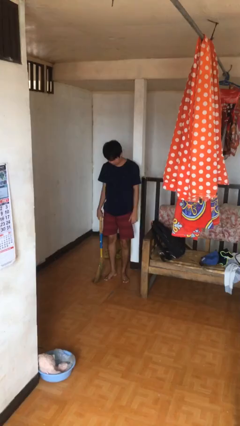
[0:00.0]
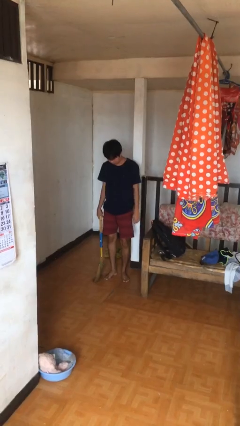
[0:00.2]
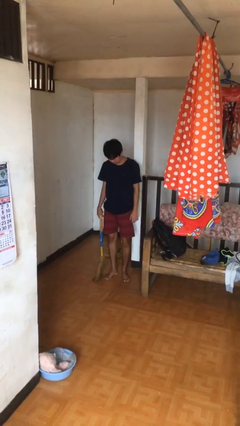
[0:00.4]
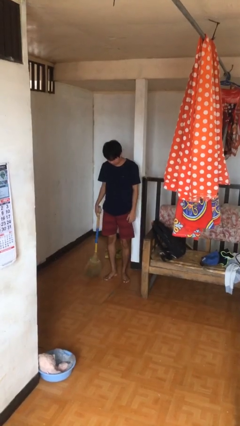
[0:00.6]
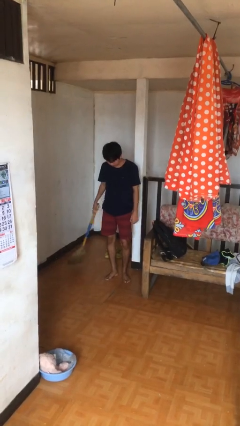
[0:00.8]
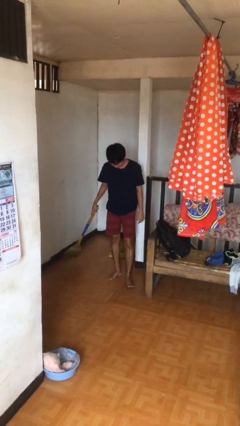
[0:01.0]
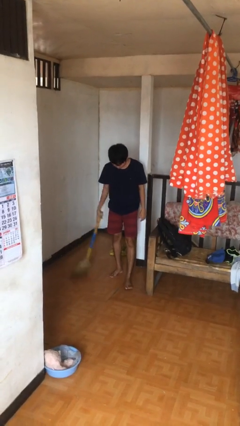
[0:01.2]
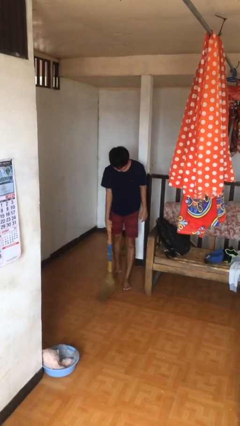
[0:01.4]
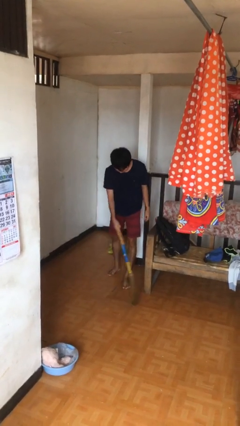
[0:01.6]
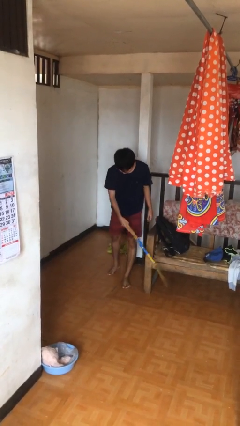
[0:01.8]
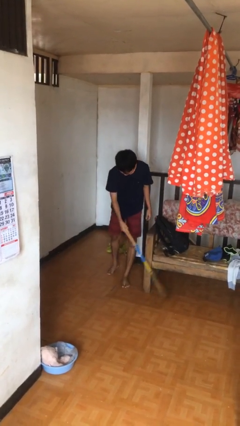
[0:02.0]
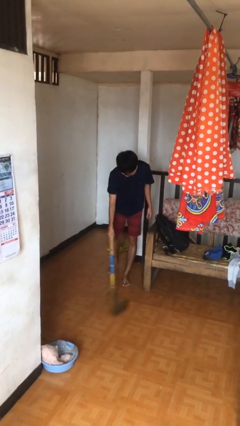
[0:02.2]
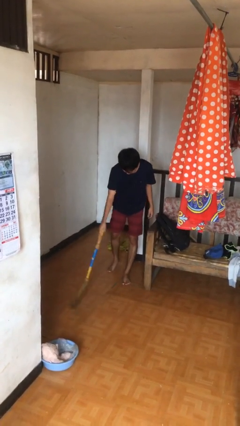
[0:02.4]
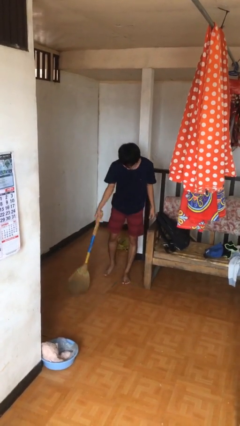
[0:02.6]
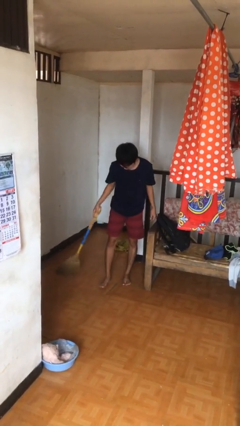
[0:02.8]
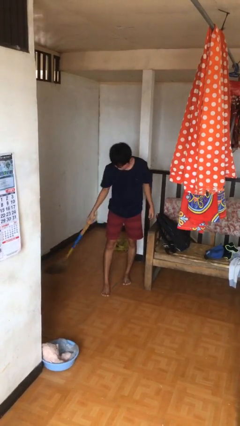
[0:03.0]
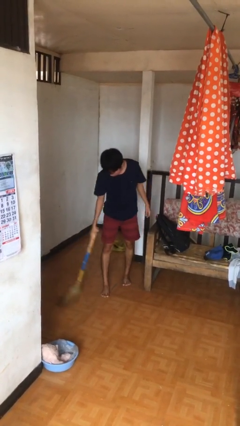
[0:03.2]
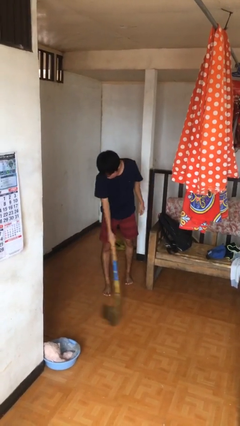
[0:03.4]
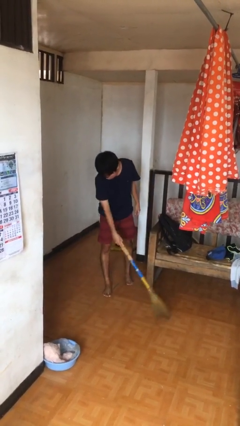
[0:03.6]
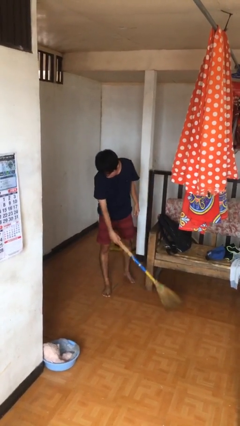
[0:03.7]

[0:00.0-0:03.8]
person sweeps floor

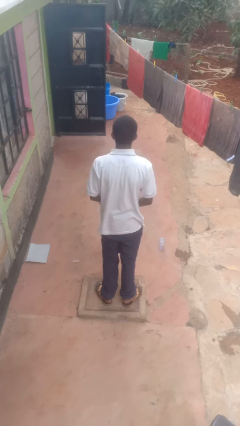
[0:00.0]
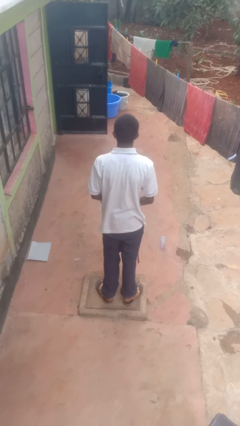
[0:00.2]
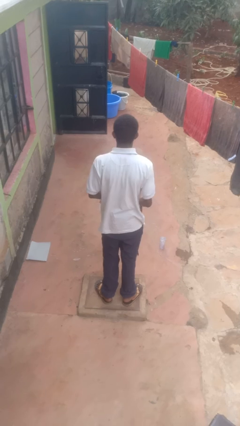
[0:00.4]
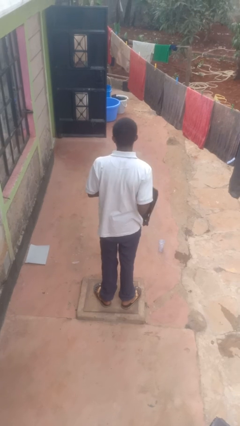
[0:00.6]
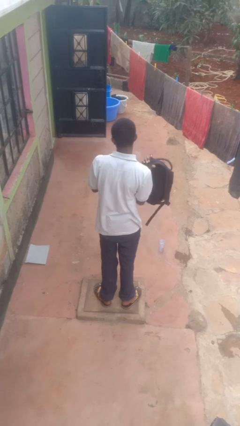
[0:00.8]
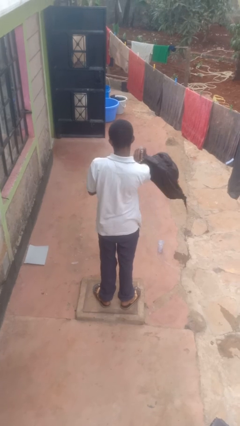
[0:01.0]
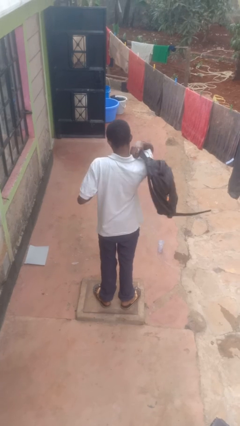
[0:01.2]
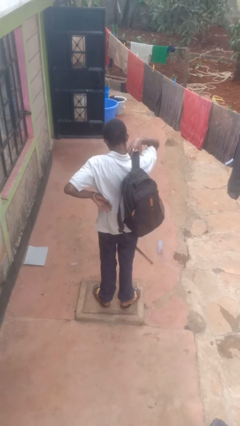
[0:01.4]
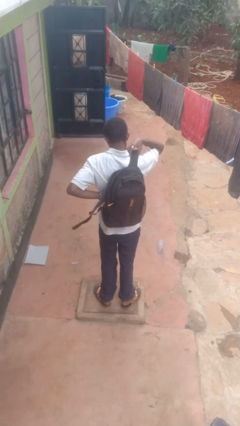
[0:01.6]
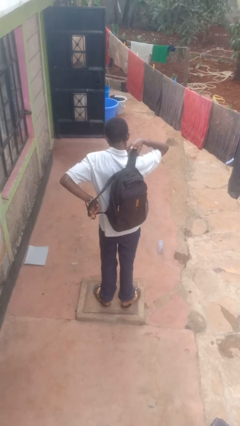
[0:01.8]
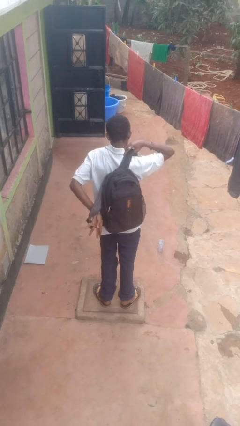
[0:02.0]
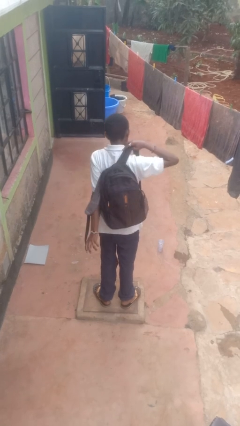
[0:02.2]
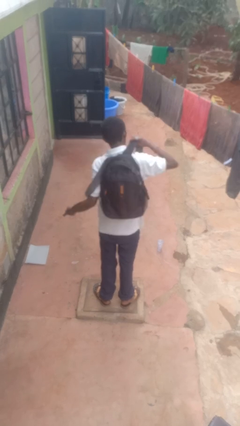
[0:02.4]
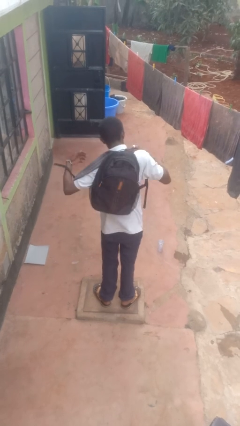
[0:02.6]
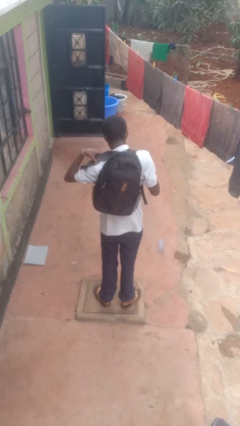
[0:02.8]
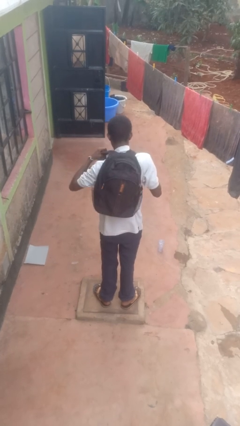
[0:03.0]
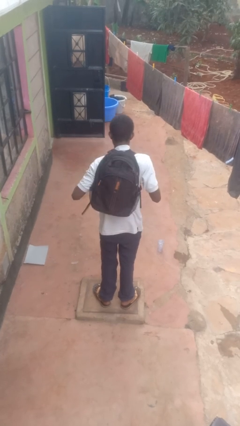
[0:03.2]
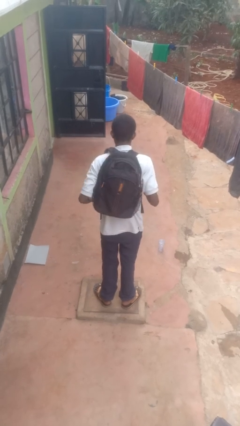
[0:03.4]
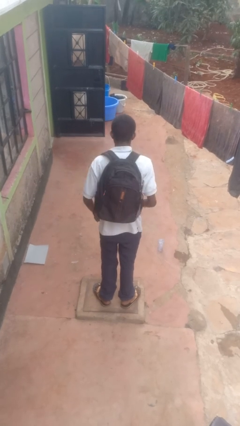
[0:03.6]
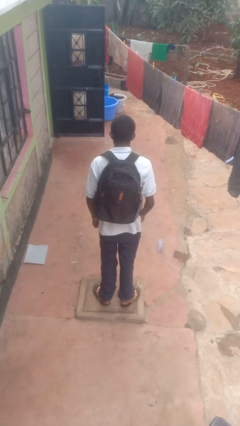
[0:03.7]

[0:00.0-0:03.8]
person puts on backpack

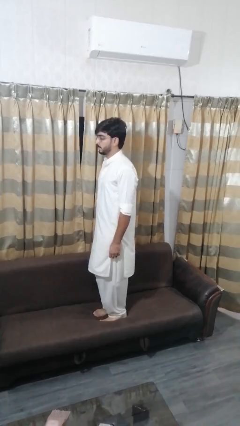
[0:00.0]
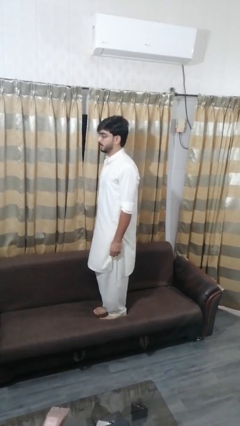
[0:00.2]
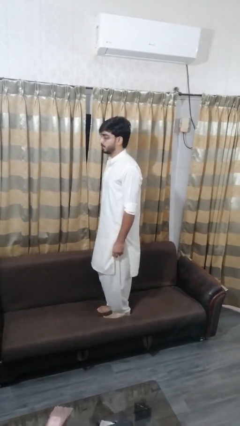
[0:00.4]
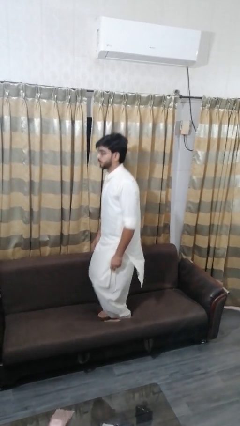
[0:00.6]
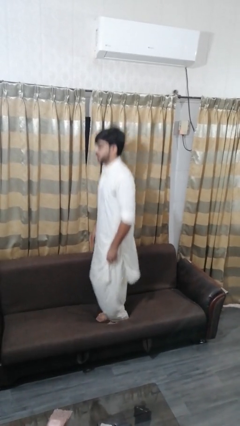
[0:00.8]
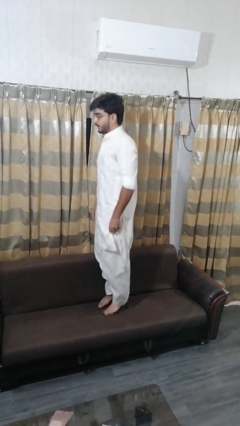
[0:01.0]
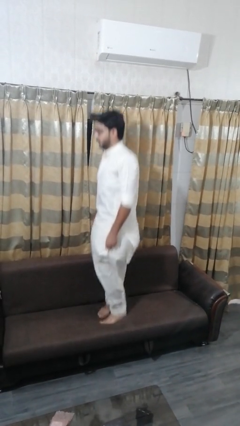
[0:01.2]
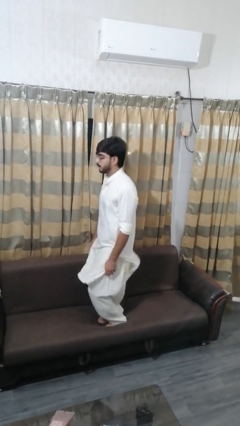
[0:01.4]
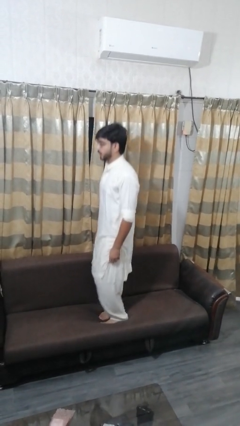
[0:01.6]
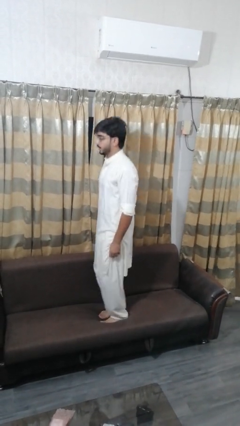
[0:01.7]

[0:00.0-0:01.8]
person jumps on couch

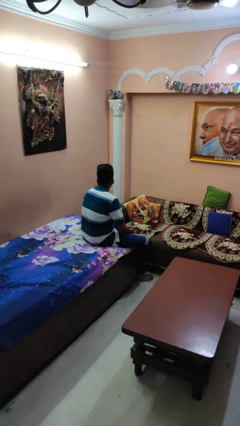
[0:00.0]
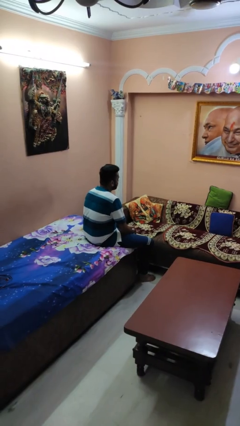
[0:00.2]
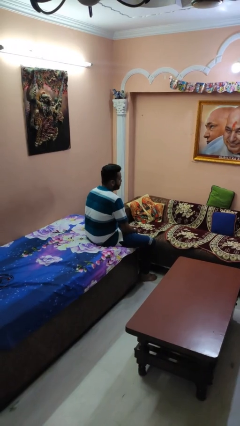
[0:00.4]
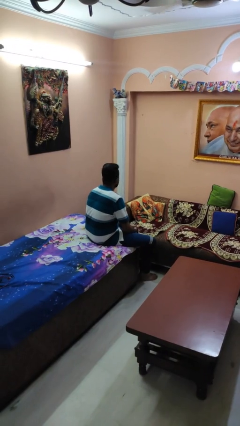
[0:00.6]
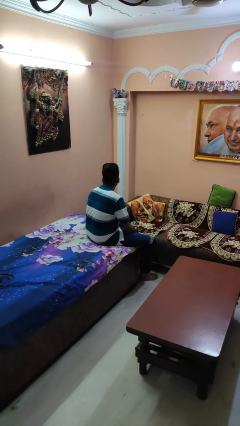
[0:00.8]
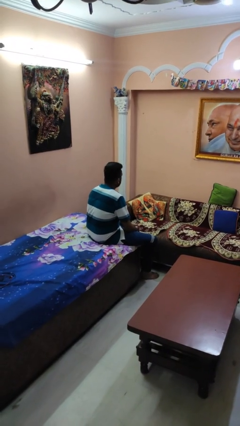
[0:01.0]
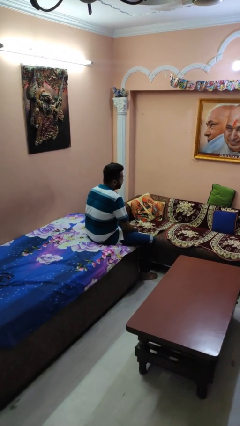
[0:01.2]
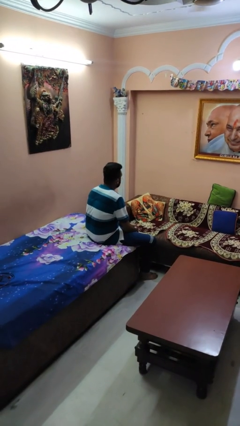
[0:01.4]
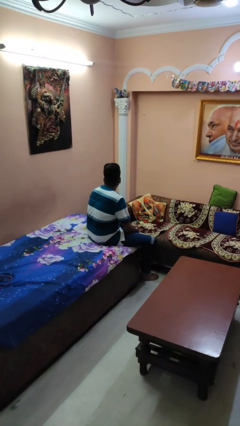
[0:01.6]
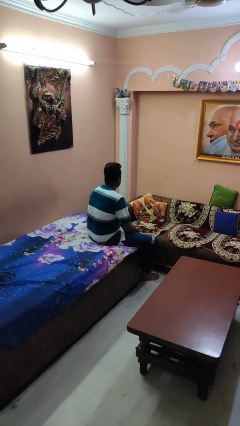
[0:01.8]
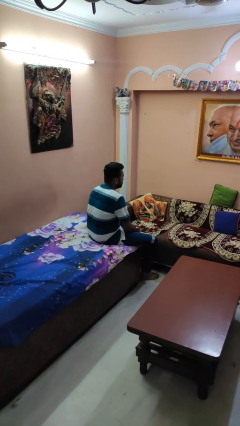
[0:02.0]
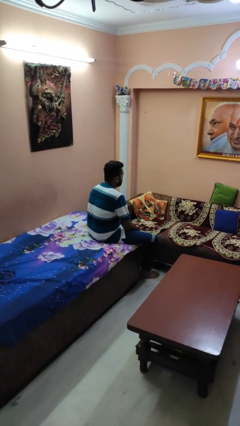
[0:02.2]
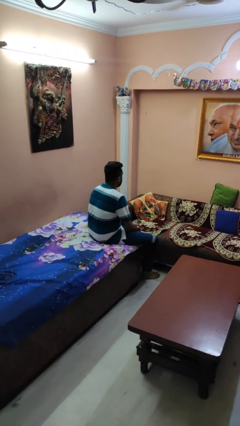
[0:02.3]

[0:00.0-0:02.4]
person shakes head

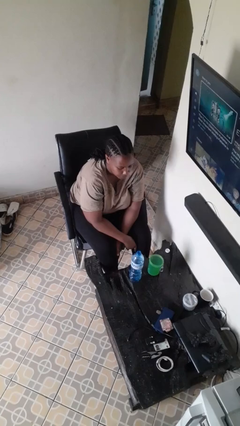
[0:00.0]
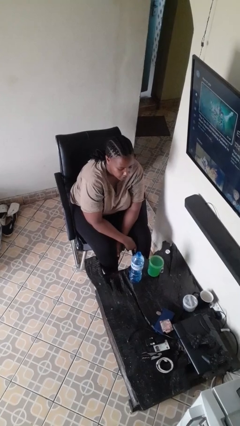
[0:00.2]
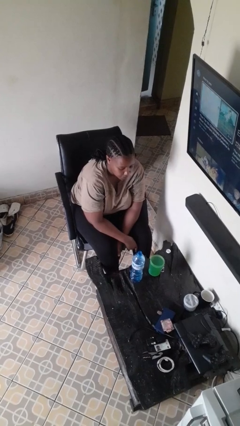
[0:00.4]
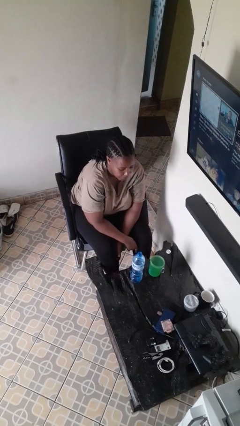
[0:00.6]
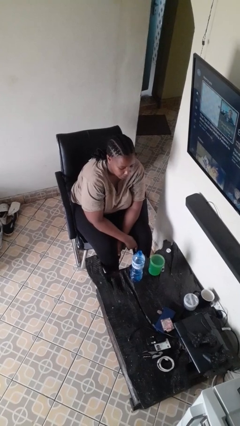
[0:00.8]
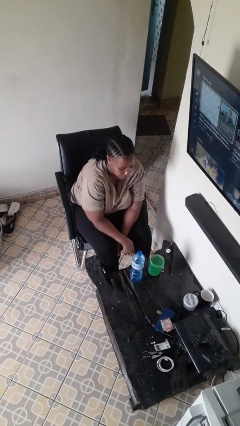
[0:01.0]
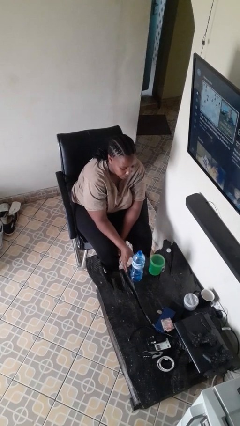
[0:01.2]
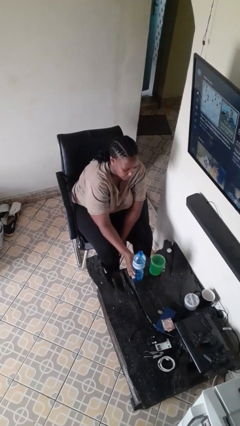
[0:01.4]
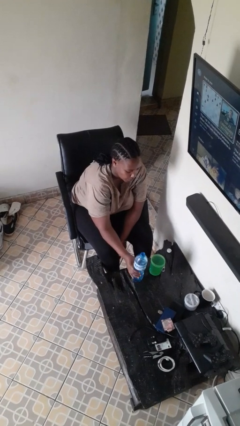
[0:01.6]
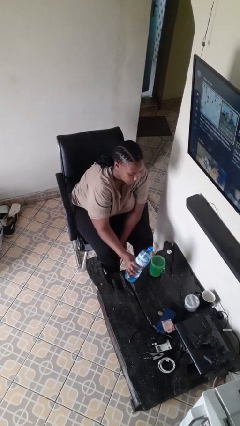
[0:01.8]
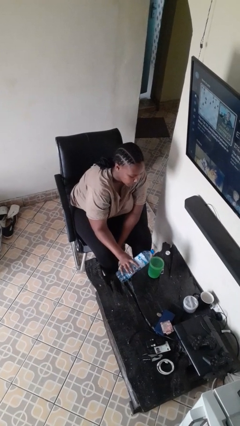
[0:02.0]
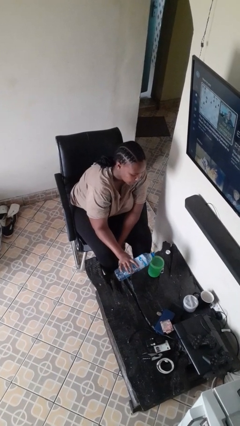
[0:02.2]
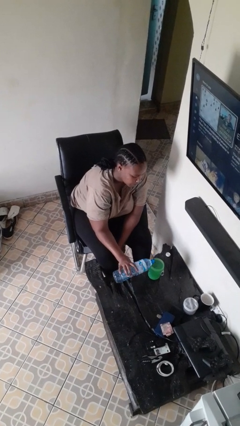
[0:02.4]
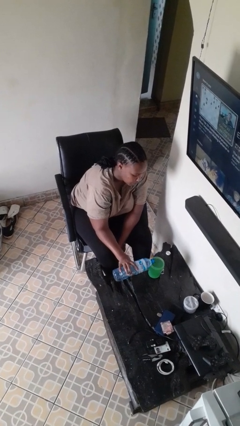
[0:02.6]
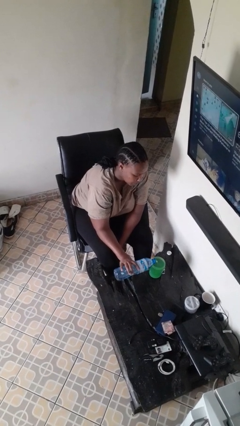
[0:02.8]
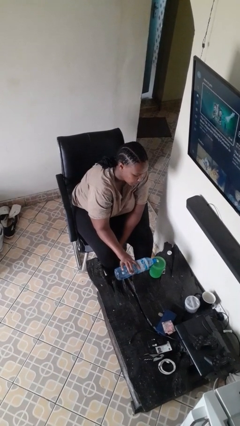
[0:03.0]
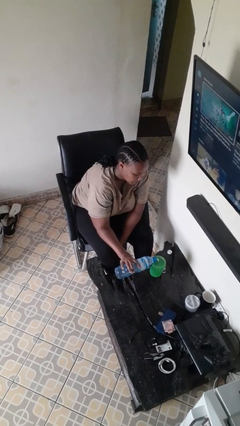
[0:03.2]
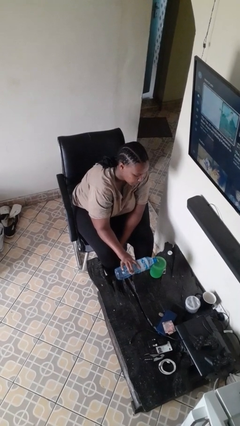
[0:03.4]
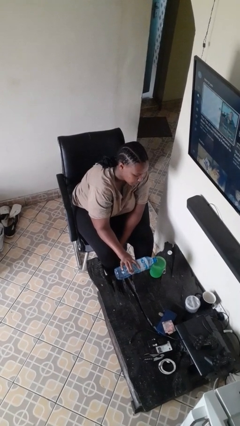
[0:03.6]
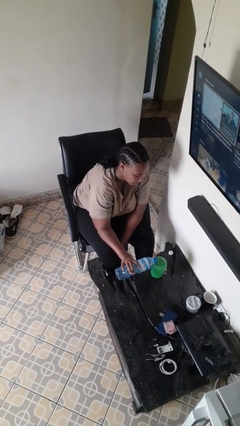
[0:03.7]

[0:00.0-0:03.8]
person pours liquid into cup

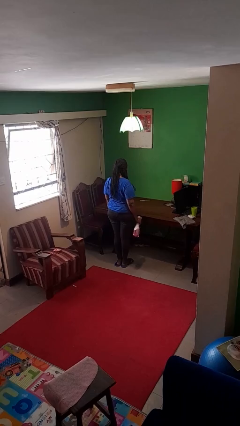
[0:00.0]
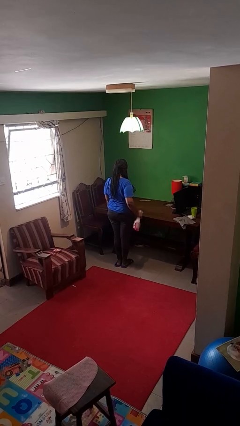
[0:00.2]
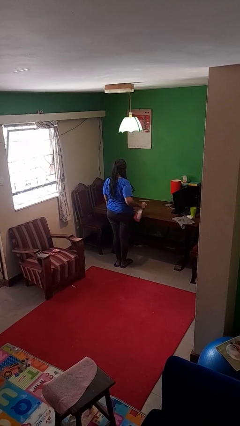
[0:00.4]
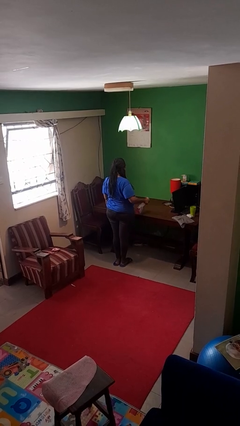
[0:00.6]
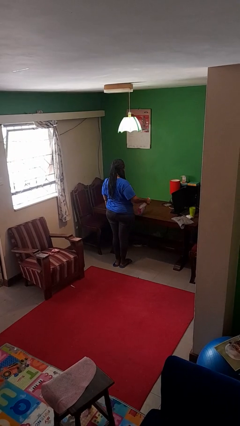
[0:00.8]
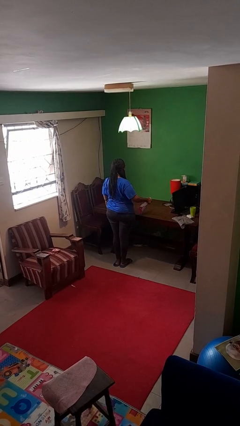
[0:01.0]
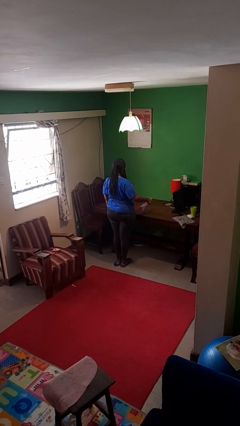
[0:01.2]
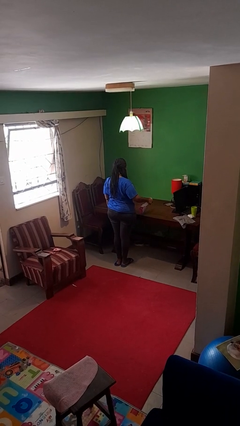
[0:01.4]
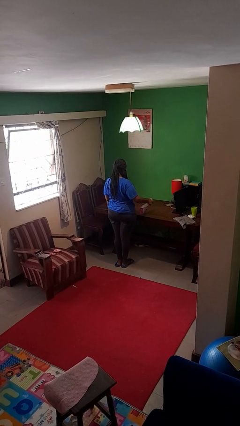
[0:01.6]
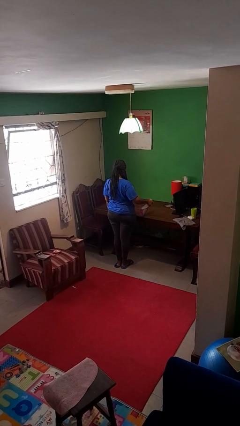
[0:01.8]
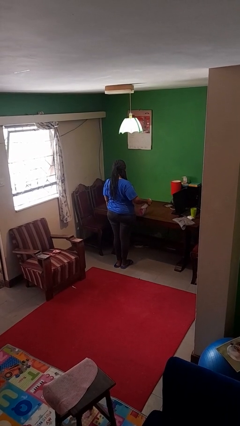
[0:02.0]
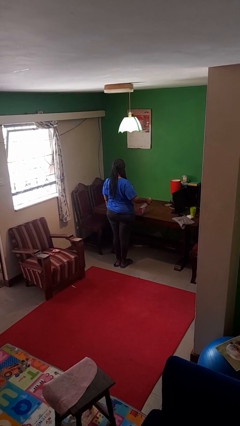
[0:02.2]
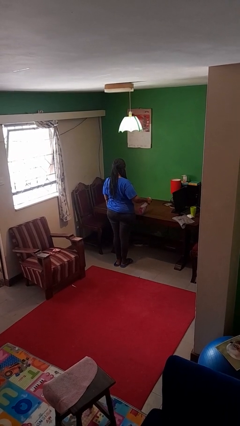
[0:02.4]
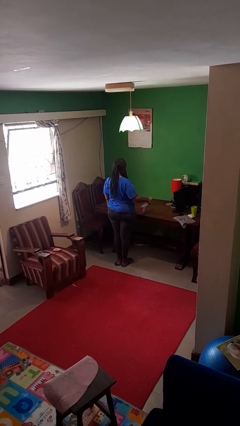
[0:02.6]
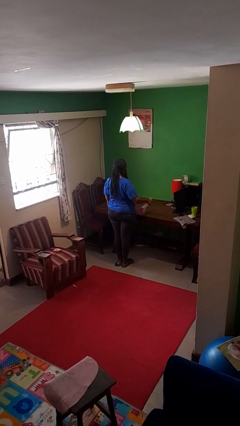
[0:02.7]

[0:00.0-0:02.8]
person sprays from bottle
